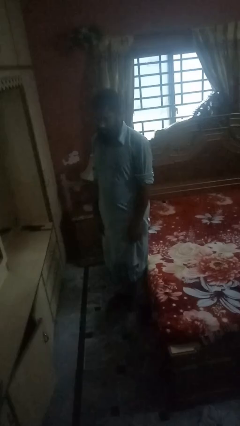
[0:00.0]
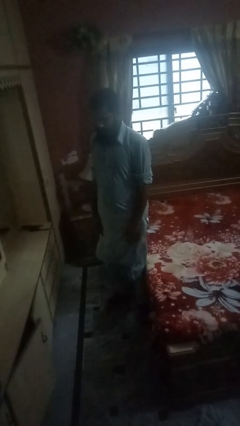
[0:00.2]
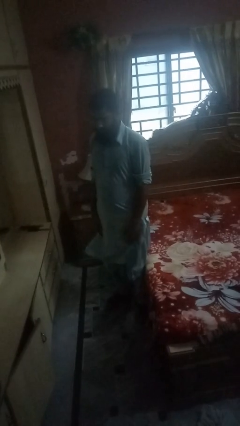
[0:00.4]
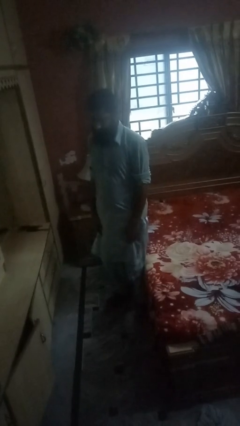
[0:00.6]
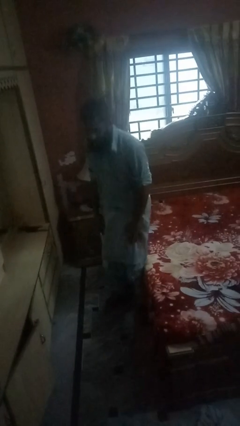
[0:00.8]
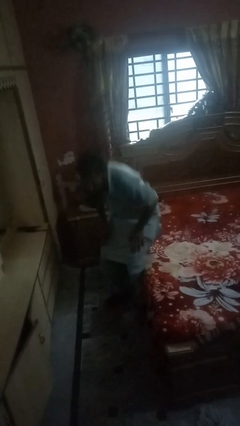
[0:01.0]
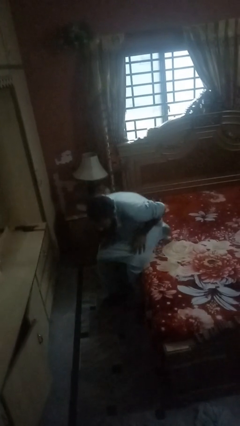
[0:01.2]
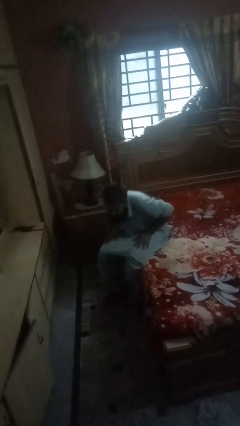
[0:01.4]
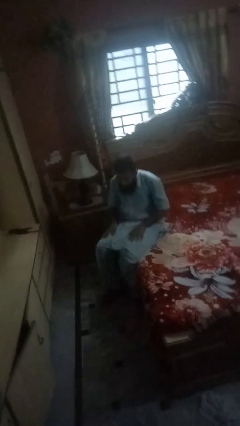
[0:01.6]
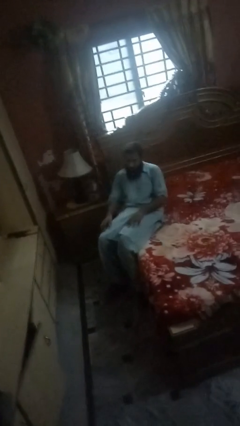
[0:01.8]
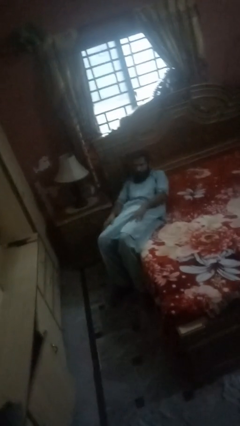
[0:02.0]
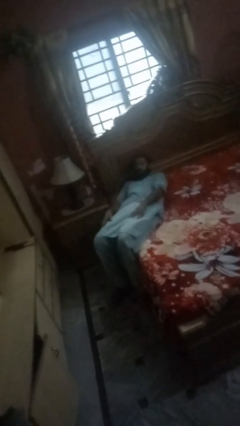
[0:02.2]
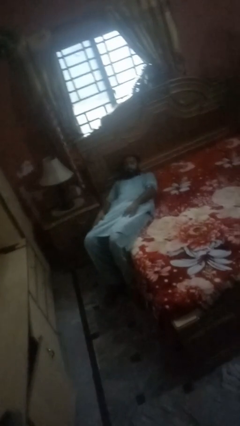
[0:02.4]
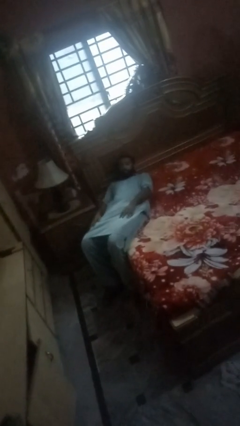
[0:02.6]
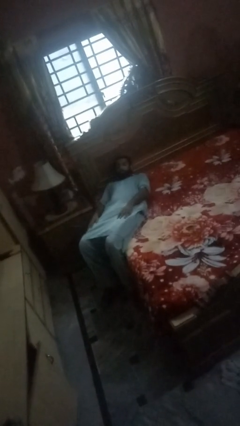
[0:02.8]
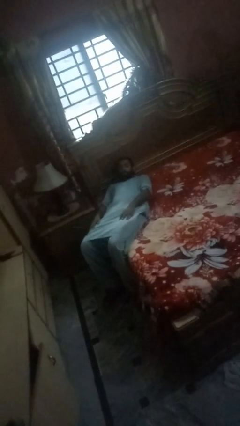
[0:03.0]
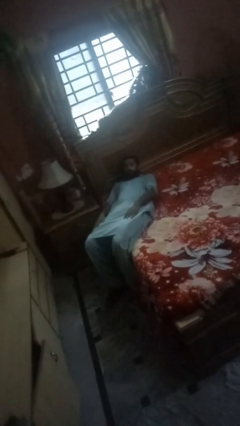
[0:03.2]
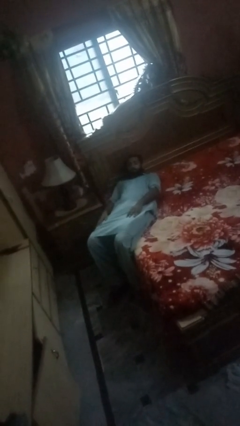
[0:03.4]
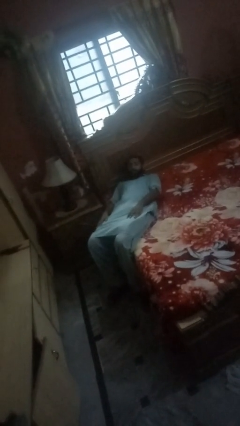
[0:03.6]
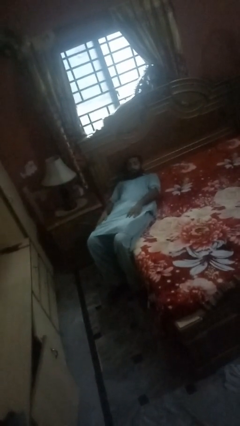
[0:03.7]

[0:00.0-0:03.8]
person lies down on bed

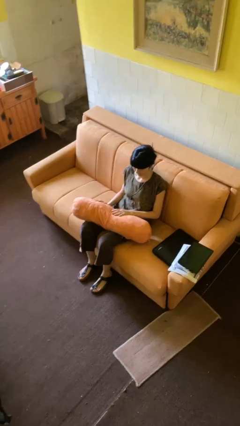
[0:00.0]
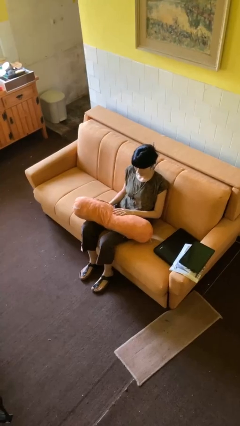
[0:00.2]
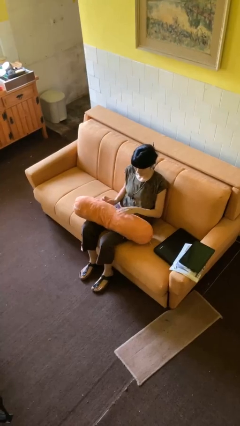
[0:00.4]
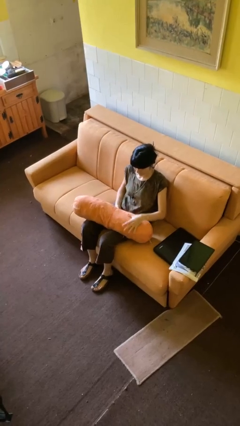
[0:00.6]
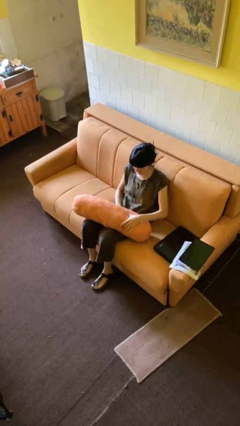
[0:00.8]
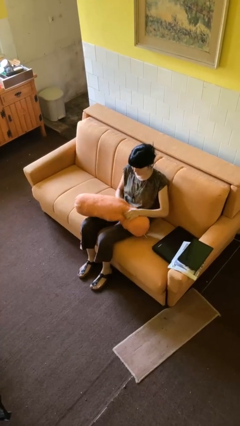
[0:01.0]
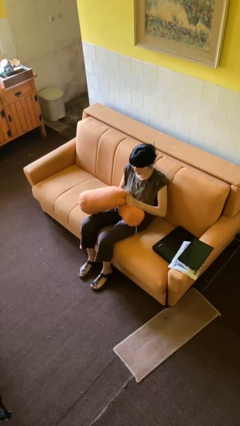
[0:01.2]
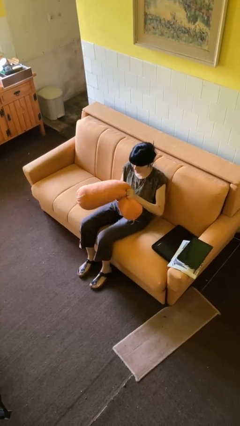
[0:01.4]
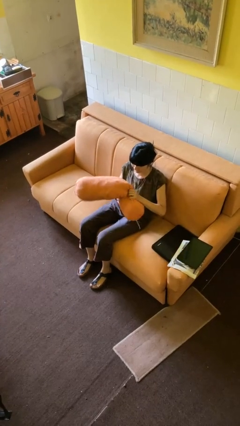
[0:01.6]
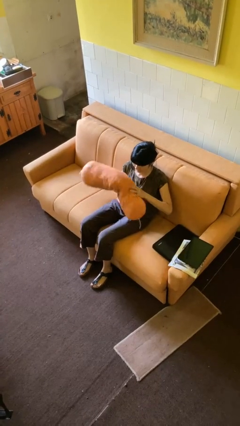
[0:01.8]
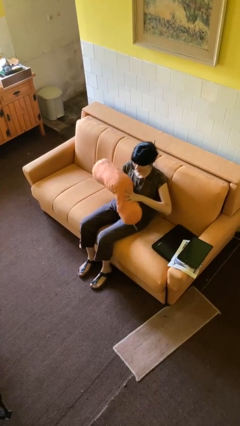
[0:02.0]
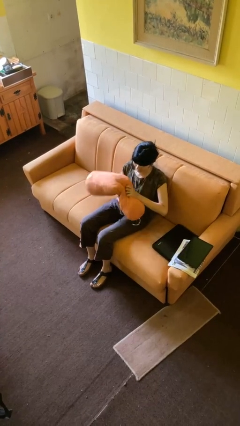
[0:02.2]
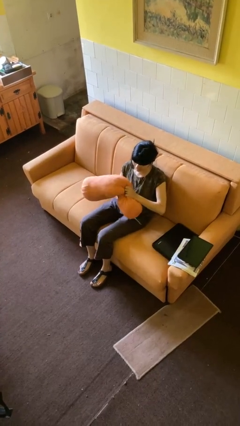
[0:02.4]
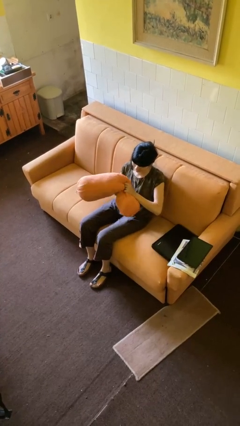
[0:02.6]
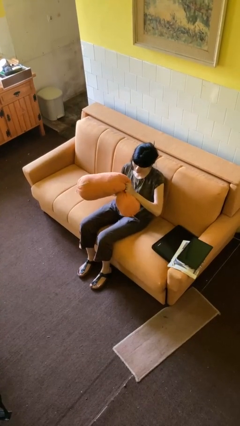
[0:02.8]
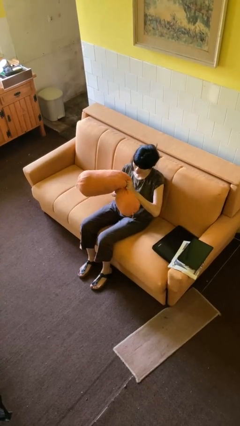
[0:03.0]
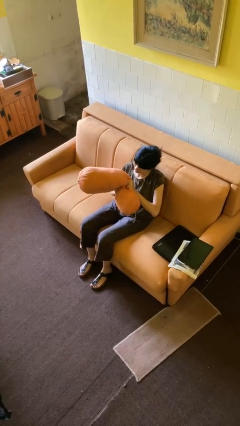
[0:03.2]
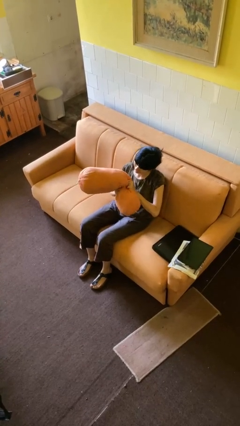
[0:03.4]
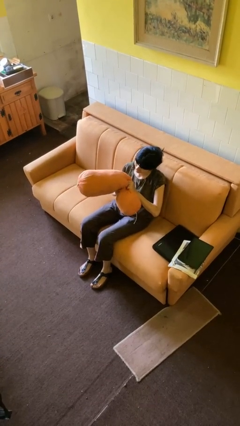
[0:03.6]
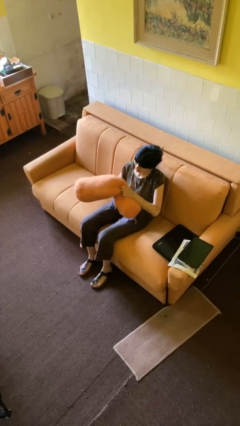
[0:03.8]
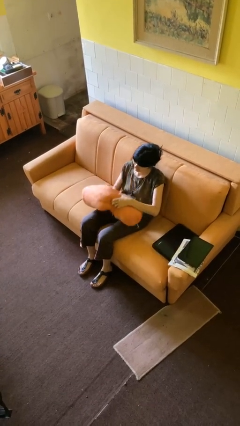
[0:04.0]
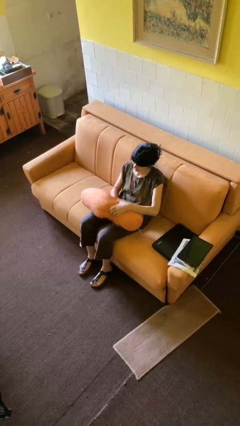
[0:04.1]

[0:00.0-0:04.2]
person squeezes object

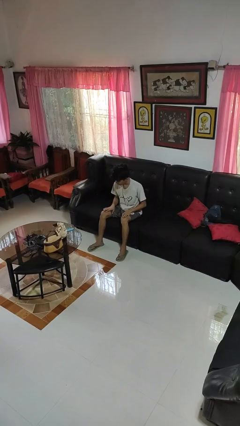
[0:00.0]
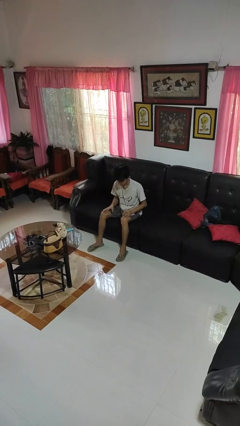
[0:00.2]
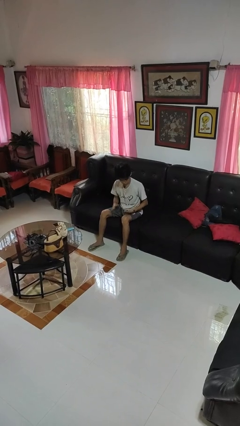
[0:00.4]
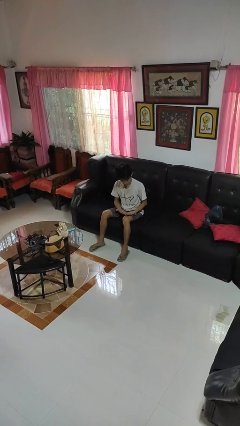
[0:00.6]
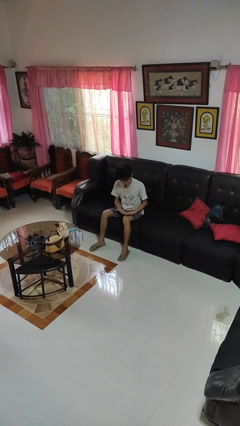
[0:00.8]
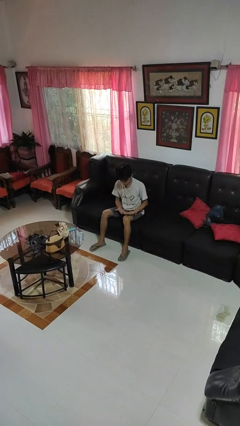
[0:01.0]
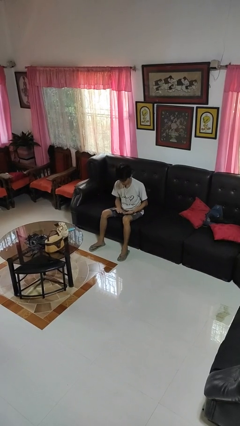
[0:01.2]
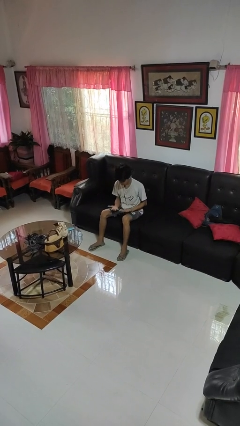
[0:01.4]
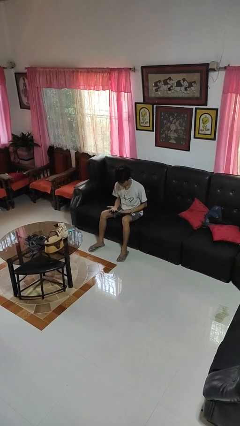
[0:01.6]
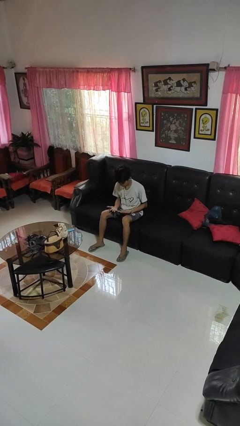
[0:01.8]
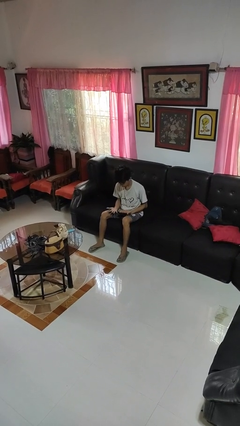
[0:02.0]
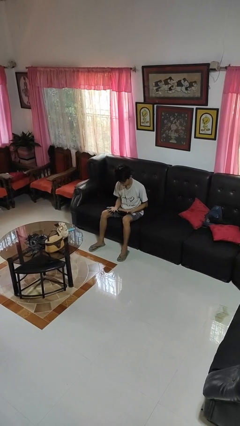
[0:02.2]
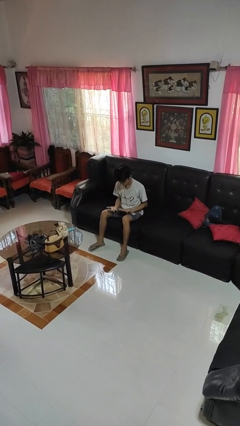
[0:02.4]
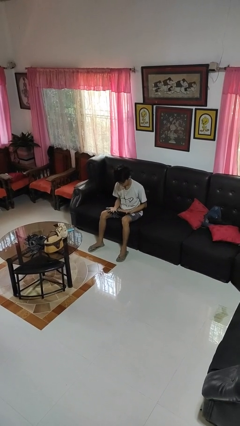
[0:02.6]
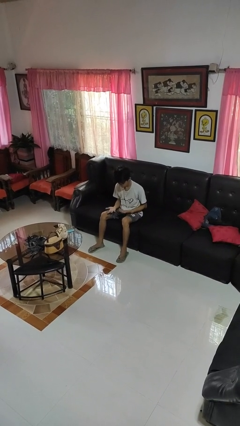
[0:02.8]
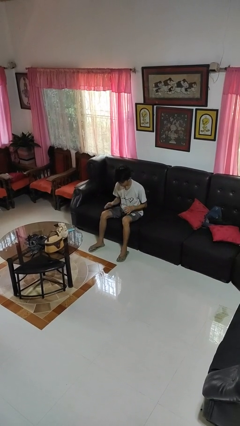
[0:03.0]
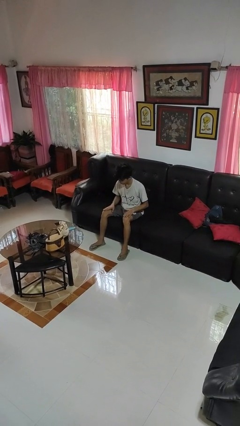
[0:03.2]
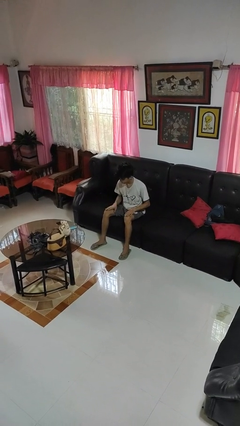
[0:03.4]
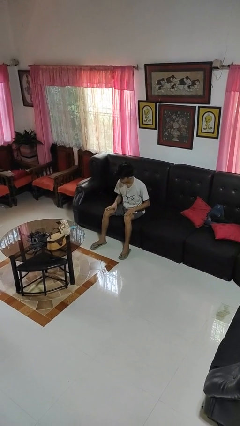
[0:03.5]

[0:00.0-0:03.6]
person looks at hands in lap

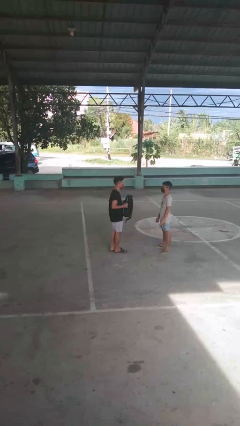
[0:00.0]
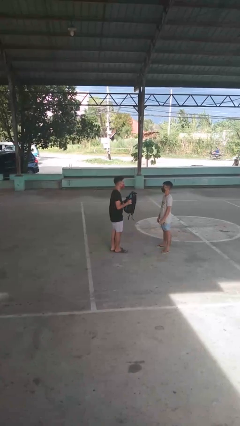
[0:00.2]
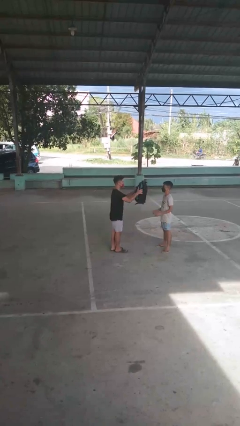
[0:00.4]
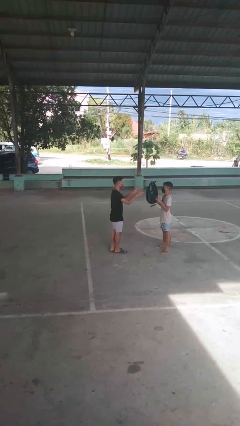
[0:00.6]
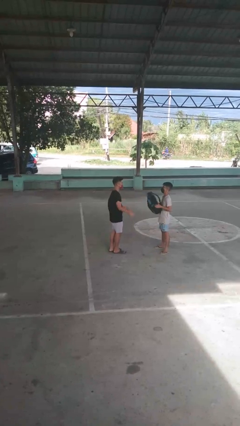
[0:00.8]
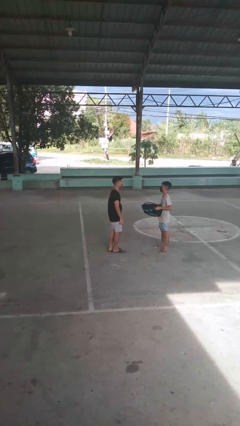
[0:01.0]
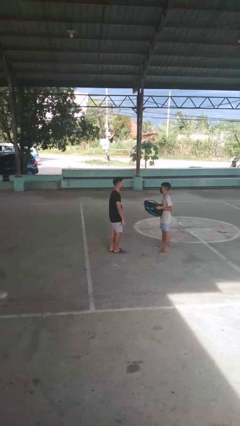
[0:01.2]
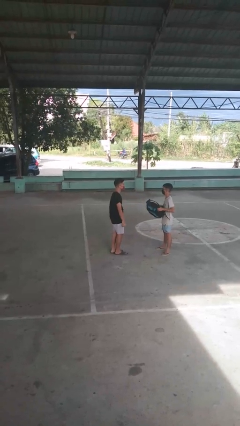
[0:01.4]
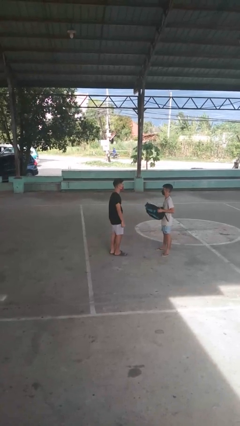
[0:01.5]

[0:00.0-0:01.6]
person throws object to person

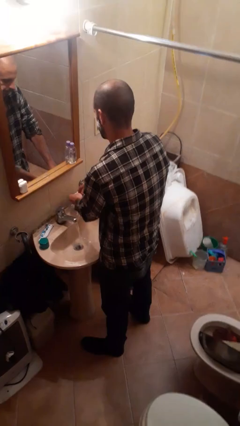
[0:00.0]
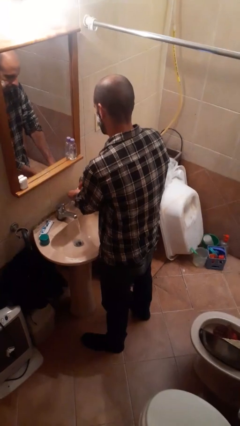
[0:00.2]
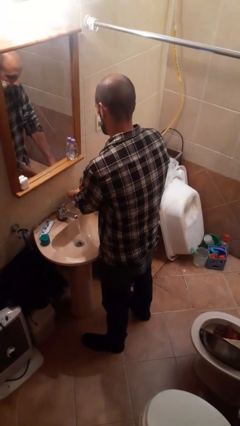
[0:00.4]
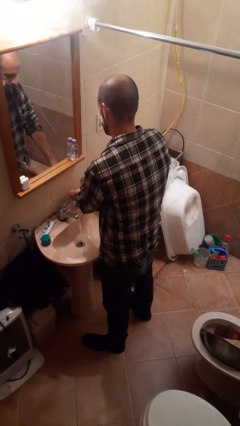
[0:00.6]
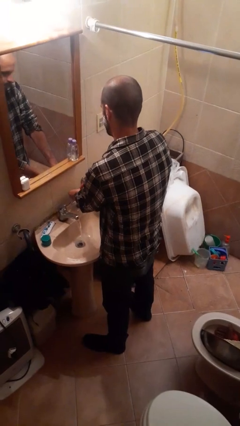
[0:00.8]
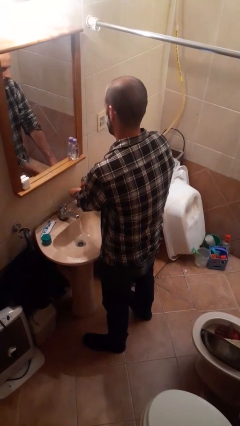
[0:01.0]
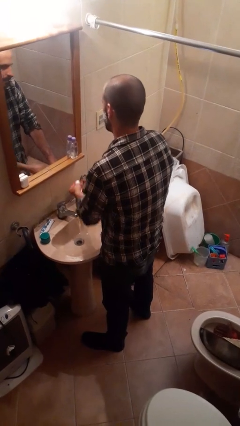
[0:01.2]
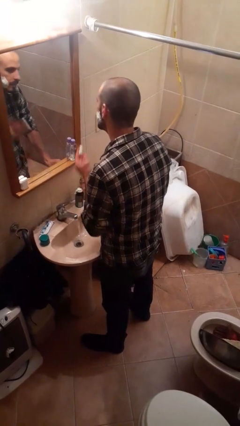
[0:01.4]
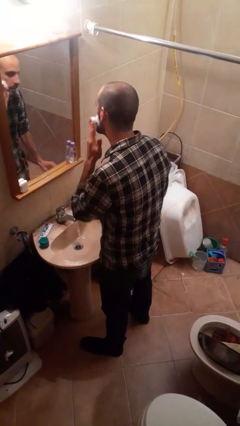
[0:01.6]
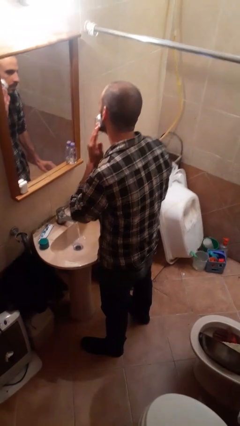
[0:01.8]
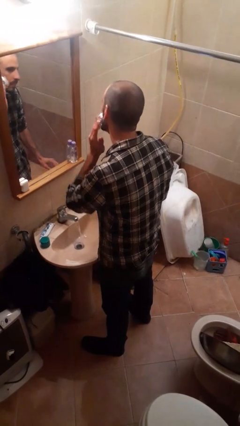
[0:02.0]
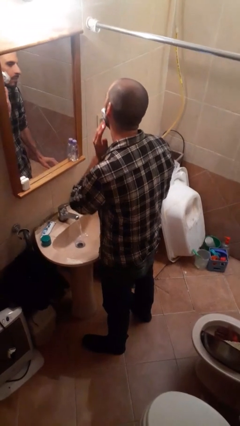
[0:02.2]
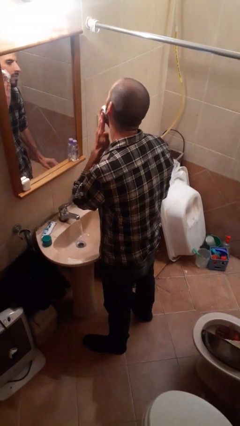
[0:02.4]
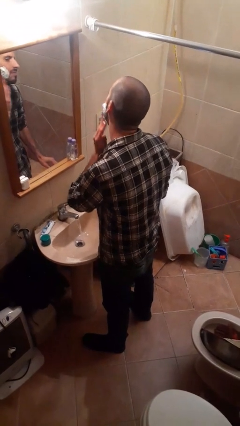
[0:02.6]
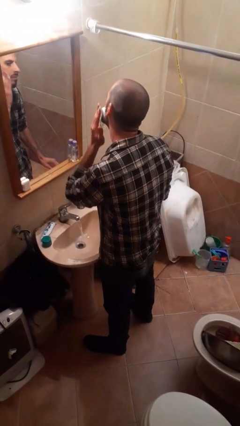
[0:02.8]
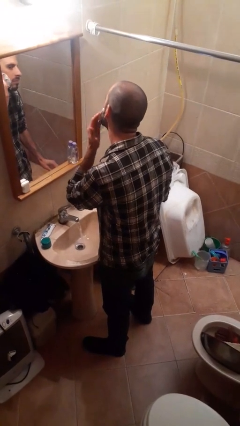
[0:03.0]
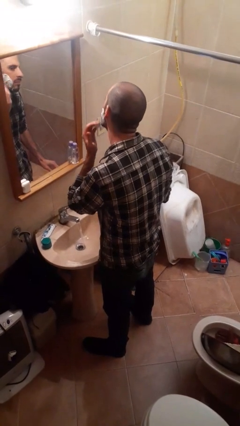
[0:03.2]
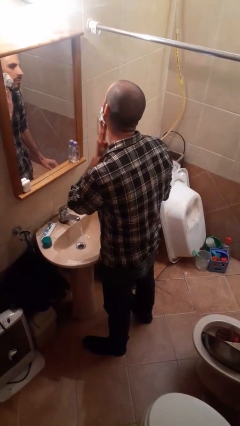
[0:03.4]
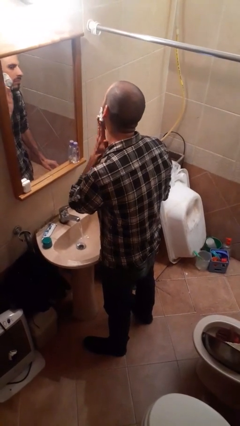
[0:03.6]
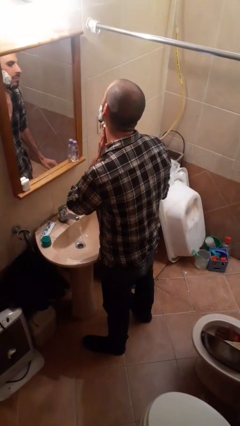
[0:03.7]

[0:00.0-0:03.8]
person applies shaving cream
